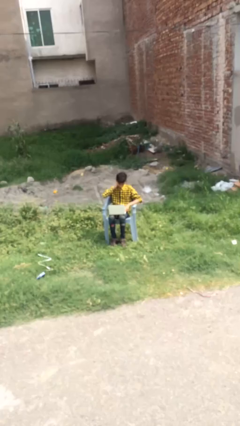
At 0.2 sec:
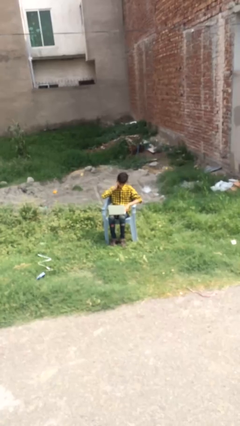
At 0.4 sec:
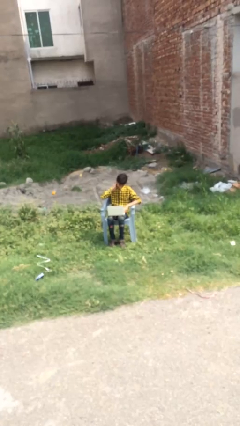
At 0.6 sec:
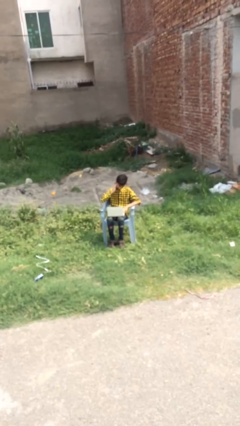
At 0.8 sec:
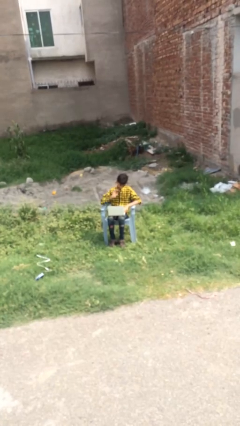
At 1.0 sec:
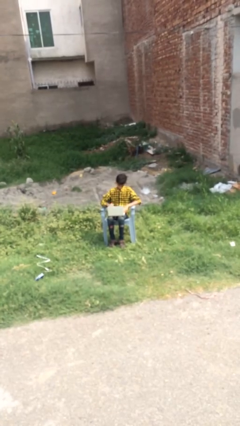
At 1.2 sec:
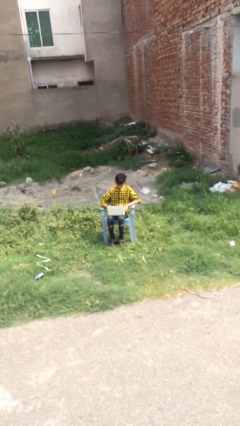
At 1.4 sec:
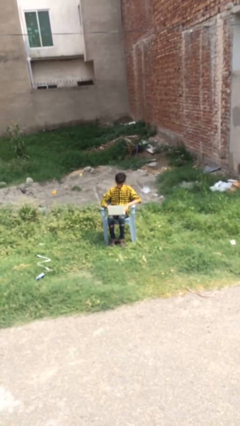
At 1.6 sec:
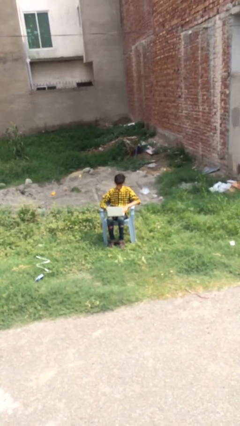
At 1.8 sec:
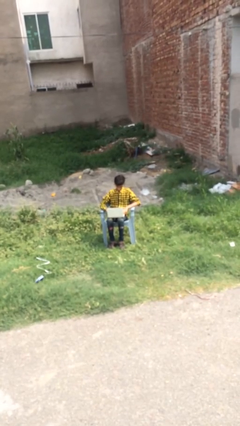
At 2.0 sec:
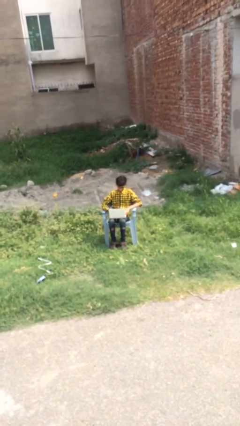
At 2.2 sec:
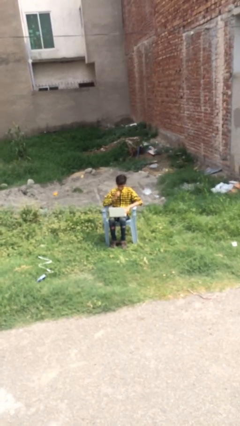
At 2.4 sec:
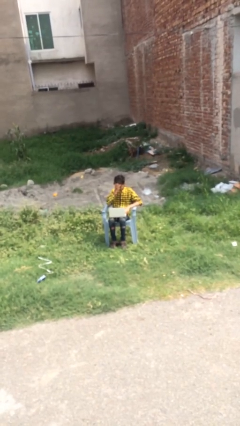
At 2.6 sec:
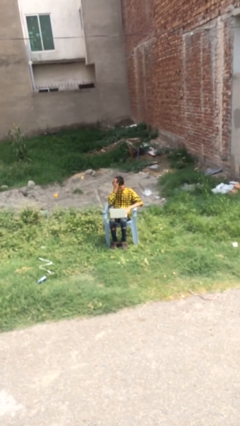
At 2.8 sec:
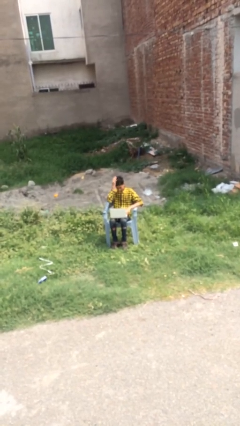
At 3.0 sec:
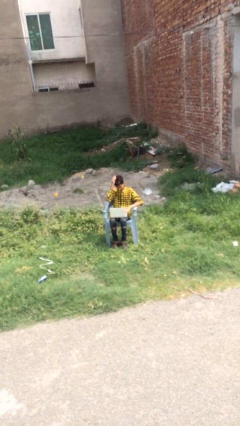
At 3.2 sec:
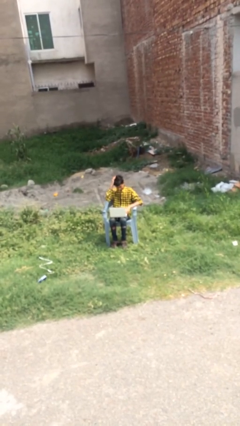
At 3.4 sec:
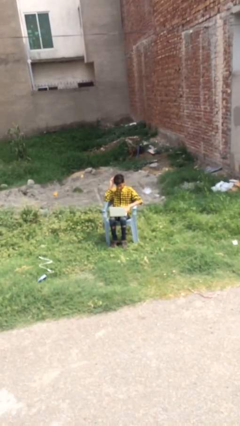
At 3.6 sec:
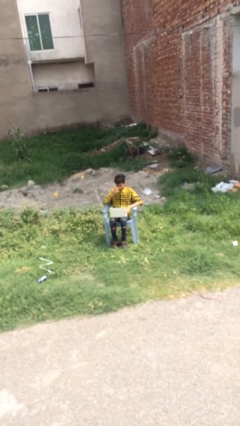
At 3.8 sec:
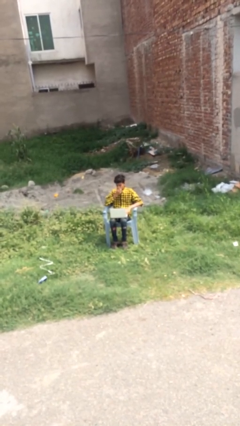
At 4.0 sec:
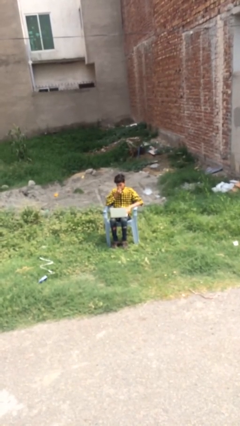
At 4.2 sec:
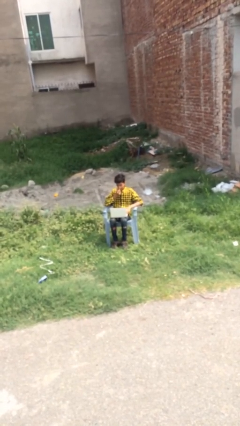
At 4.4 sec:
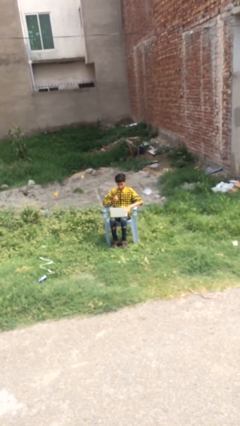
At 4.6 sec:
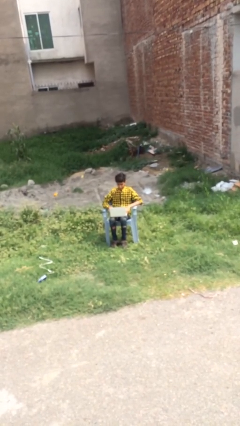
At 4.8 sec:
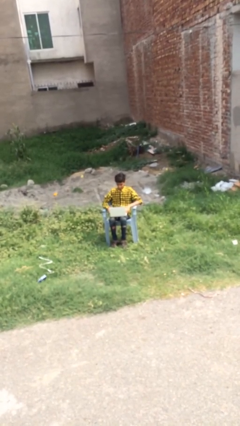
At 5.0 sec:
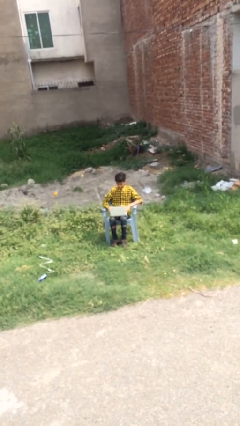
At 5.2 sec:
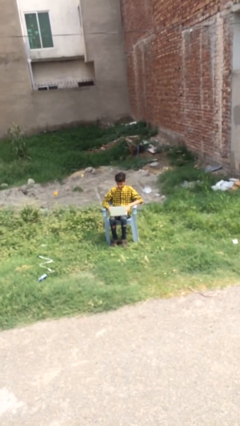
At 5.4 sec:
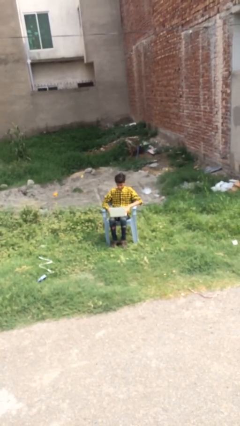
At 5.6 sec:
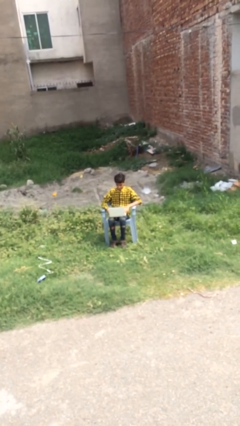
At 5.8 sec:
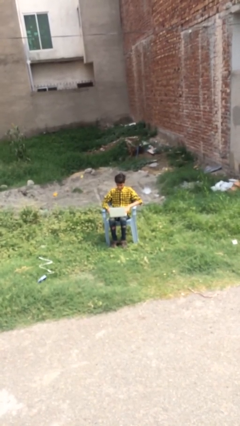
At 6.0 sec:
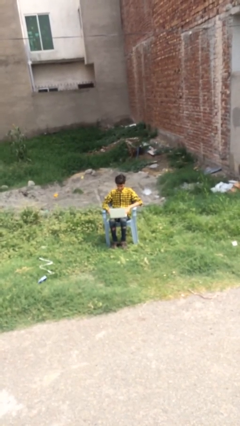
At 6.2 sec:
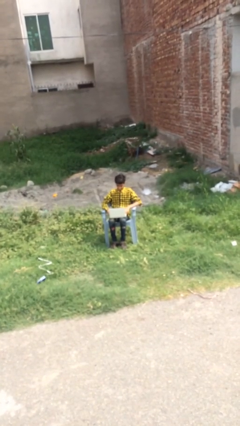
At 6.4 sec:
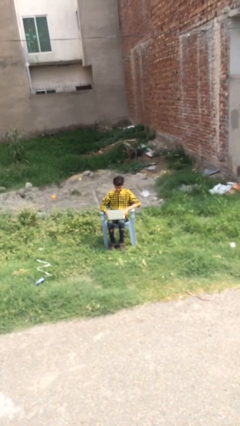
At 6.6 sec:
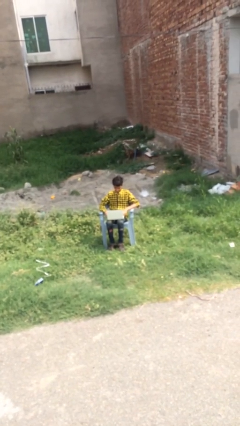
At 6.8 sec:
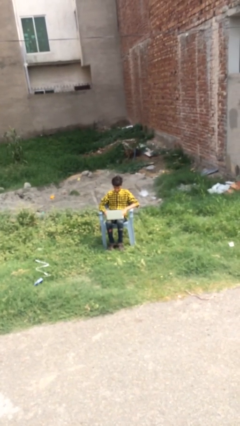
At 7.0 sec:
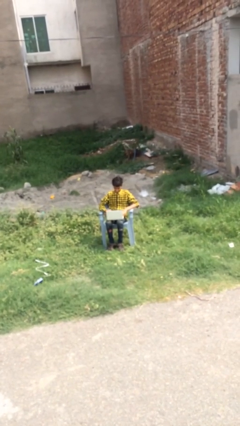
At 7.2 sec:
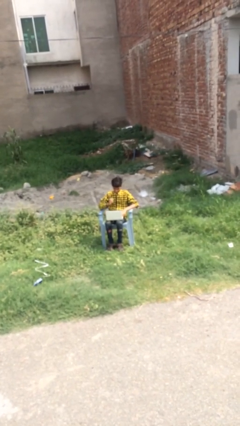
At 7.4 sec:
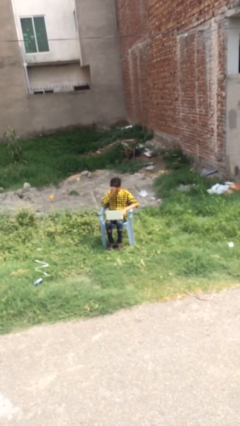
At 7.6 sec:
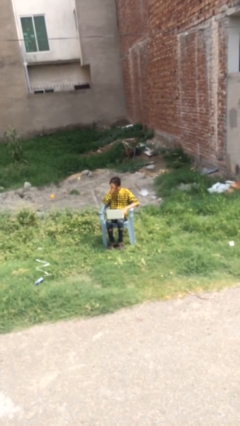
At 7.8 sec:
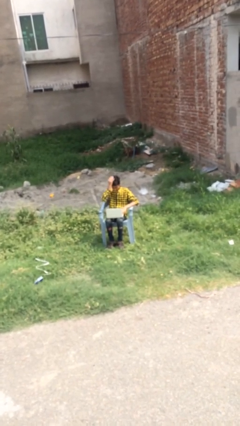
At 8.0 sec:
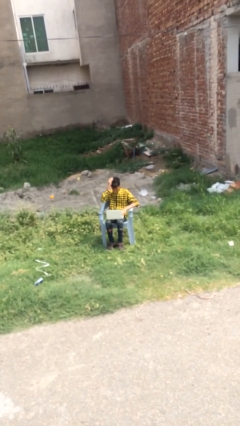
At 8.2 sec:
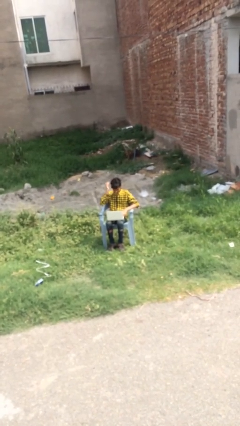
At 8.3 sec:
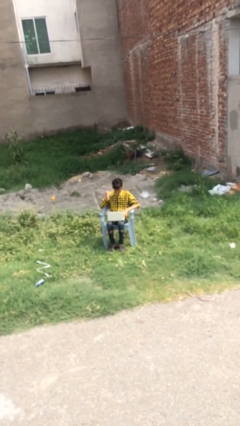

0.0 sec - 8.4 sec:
person interacts with laptop

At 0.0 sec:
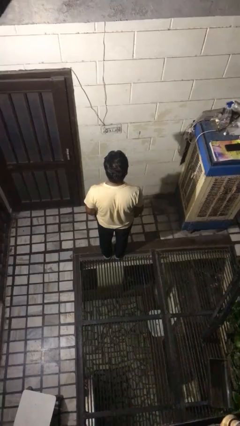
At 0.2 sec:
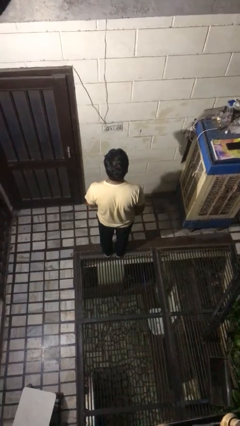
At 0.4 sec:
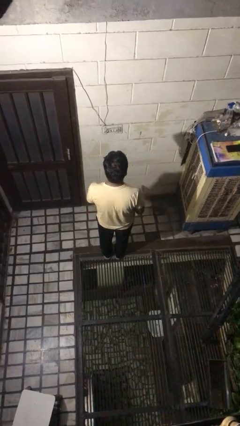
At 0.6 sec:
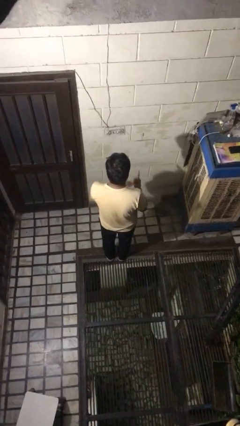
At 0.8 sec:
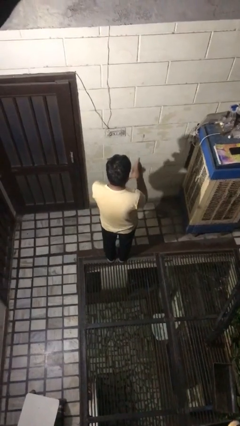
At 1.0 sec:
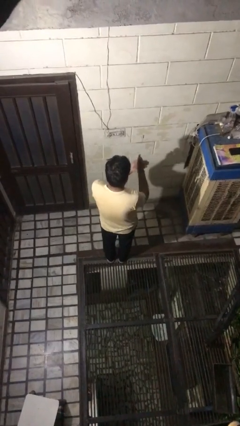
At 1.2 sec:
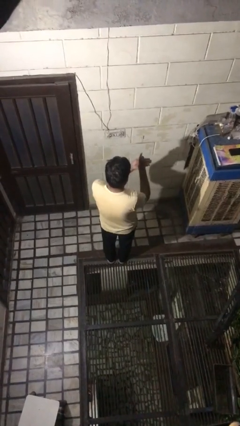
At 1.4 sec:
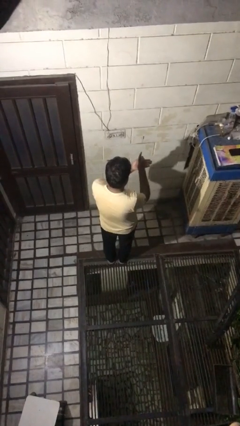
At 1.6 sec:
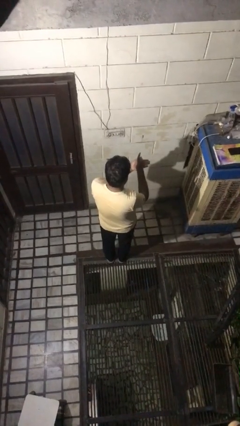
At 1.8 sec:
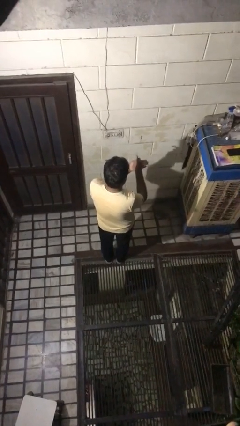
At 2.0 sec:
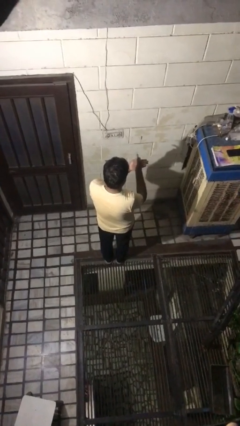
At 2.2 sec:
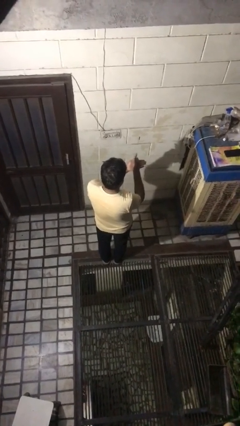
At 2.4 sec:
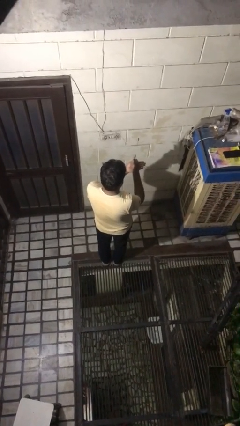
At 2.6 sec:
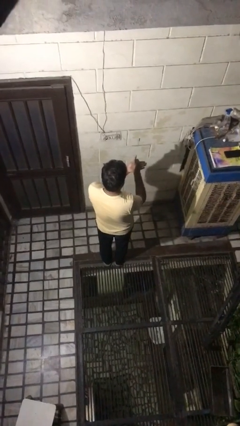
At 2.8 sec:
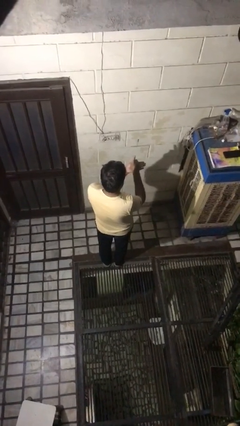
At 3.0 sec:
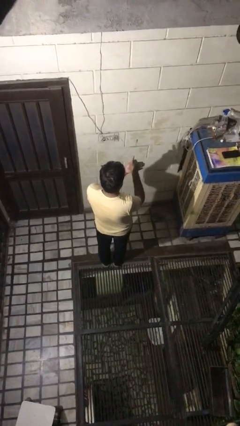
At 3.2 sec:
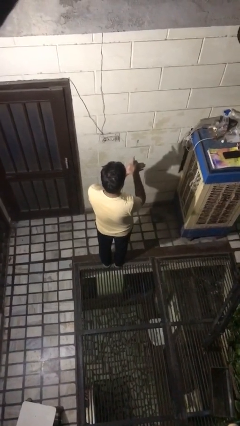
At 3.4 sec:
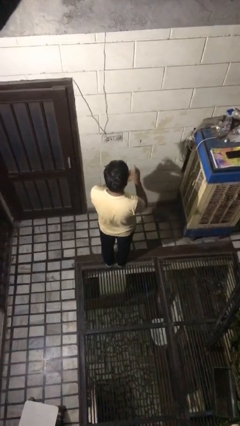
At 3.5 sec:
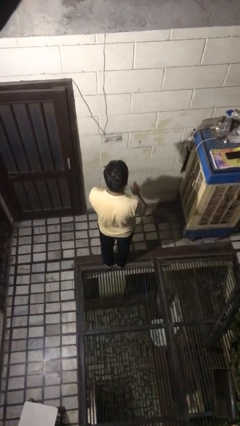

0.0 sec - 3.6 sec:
person gestures number one

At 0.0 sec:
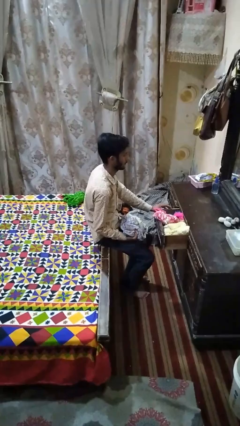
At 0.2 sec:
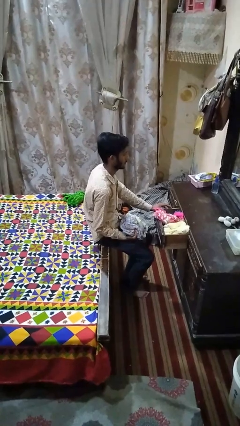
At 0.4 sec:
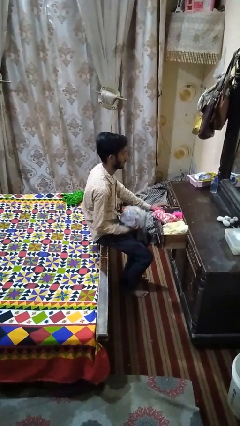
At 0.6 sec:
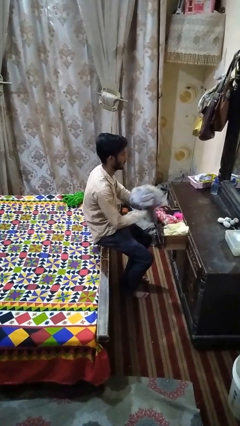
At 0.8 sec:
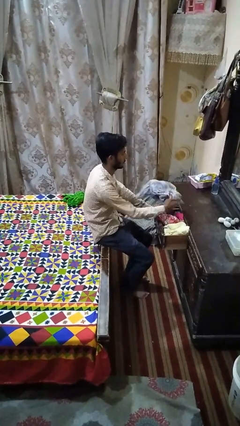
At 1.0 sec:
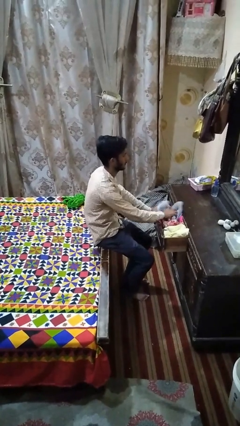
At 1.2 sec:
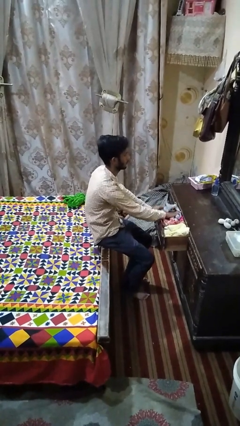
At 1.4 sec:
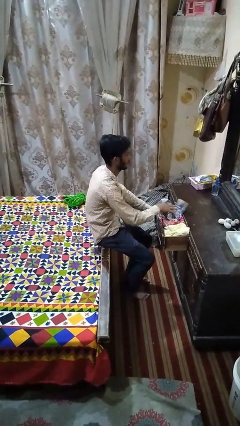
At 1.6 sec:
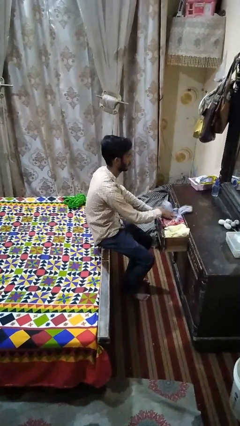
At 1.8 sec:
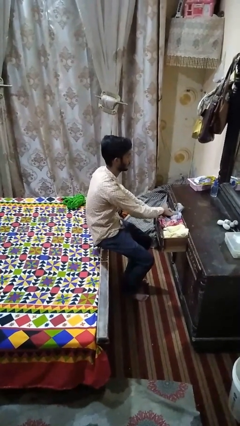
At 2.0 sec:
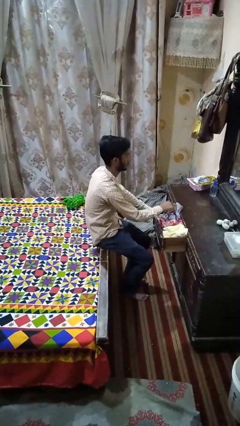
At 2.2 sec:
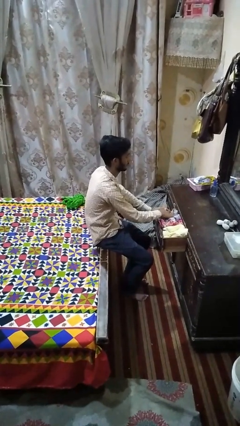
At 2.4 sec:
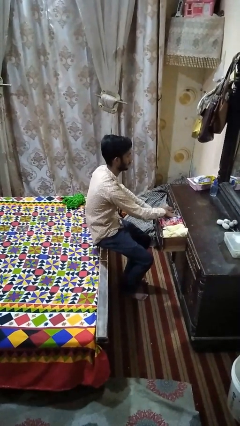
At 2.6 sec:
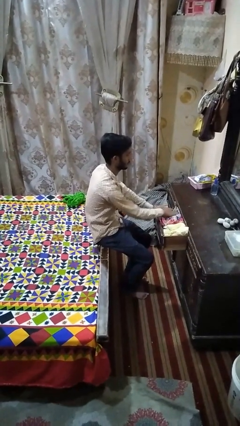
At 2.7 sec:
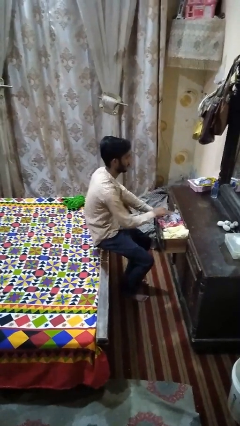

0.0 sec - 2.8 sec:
person puts clothes into dresser

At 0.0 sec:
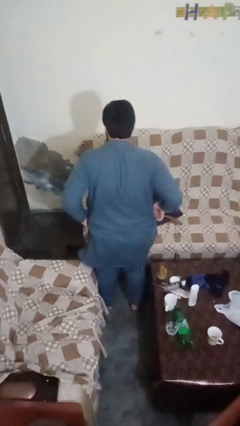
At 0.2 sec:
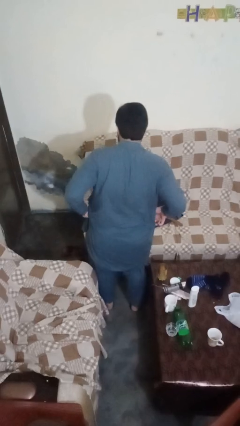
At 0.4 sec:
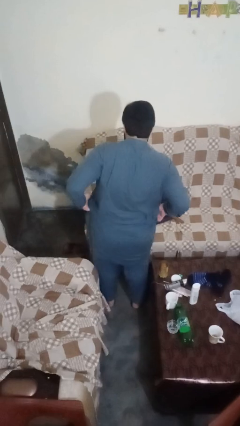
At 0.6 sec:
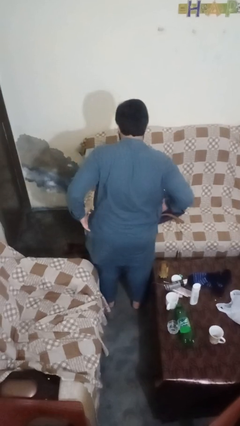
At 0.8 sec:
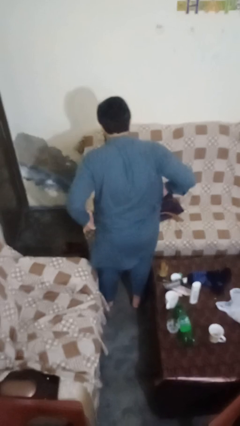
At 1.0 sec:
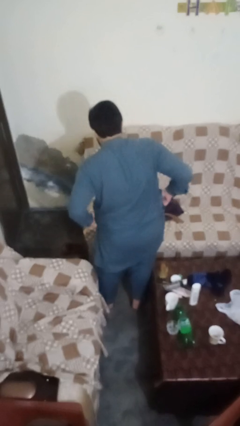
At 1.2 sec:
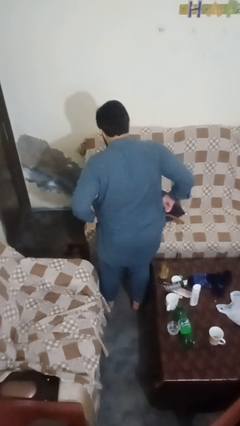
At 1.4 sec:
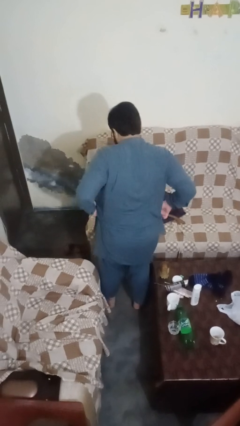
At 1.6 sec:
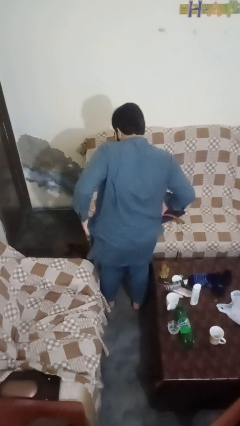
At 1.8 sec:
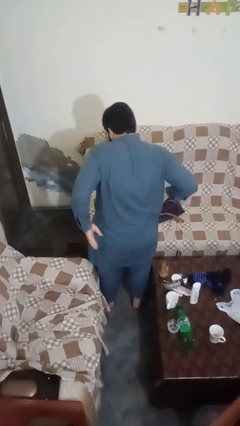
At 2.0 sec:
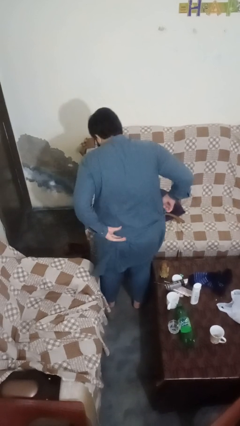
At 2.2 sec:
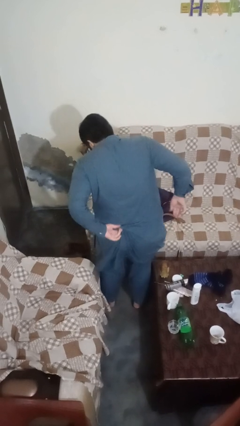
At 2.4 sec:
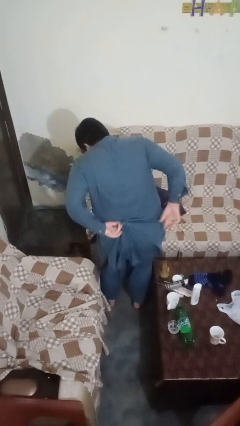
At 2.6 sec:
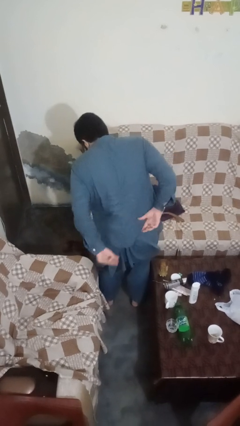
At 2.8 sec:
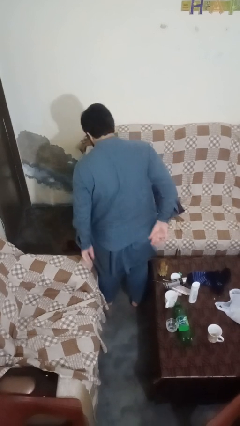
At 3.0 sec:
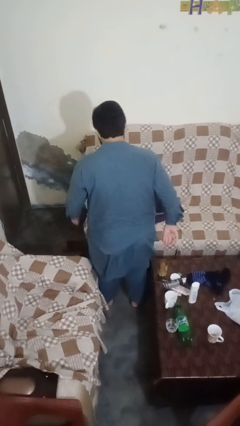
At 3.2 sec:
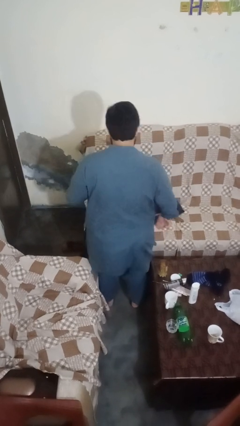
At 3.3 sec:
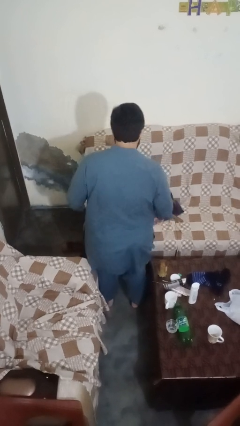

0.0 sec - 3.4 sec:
person hikes up pants
